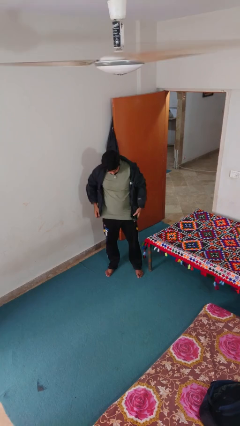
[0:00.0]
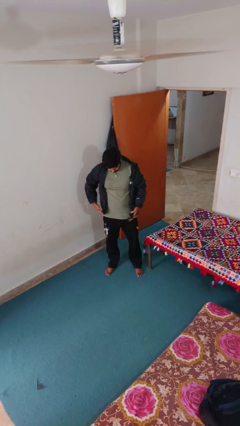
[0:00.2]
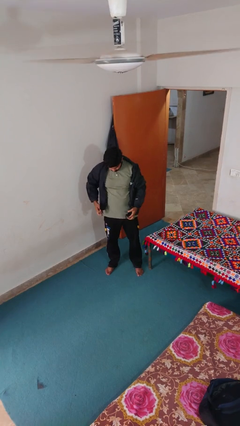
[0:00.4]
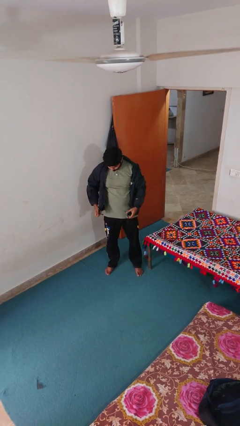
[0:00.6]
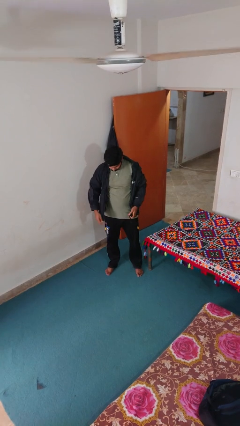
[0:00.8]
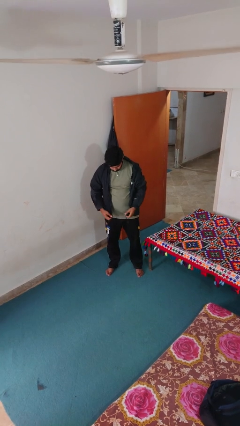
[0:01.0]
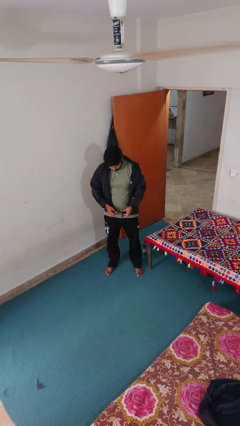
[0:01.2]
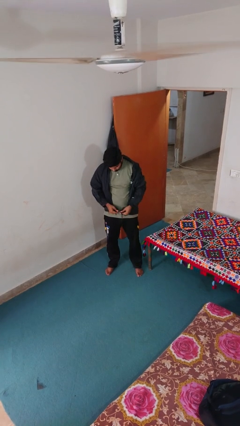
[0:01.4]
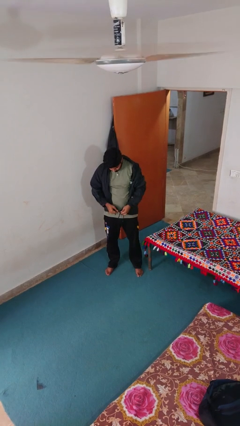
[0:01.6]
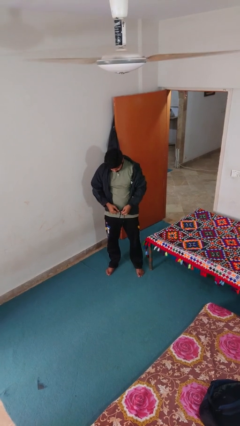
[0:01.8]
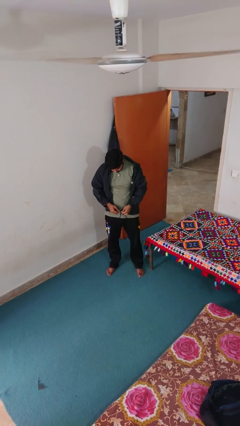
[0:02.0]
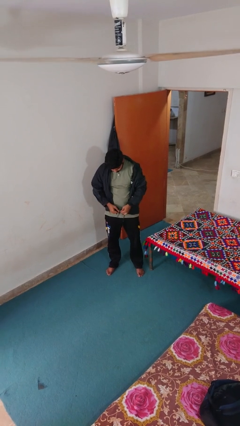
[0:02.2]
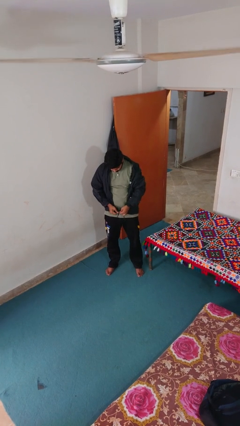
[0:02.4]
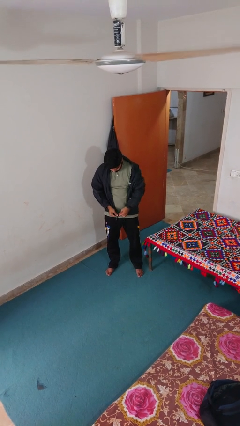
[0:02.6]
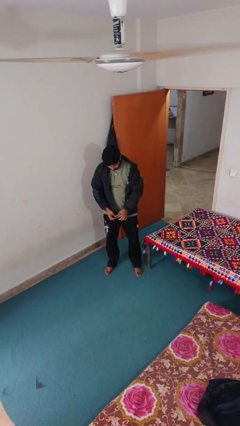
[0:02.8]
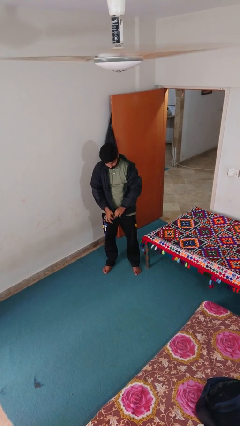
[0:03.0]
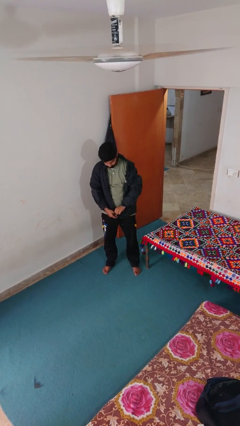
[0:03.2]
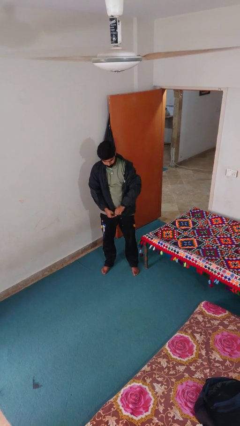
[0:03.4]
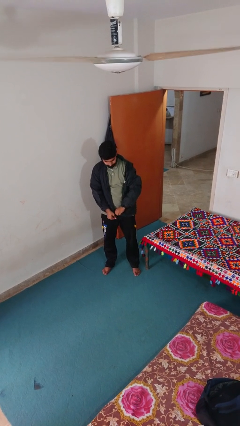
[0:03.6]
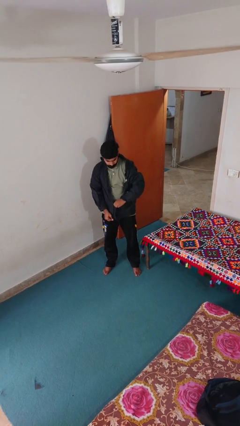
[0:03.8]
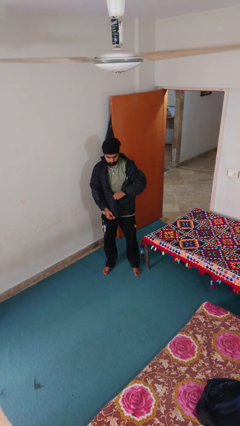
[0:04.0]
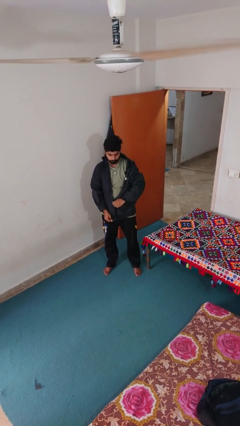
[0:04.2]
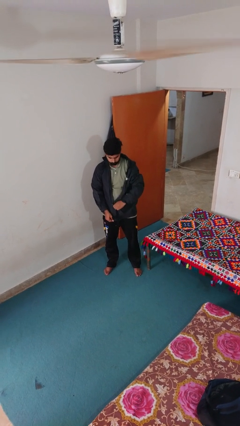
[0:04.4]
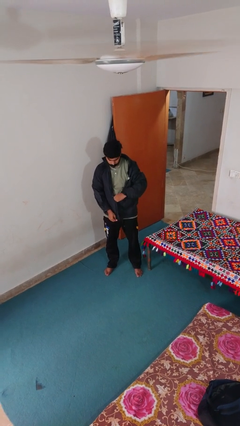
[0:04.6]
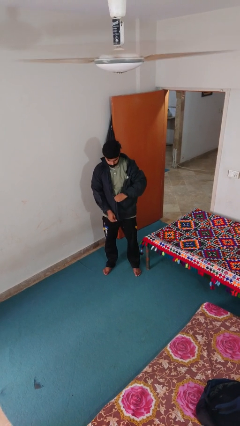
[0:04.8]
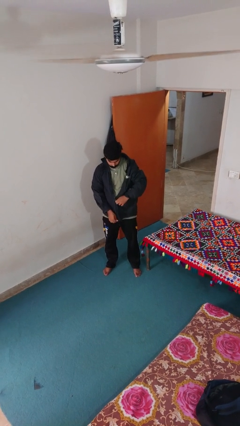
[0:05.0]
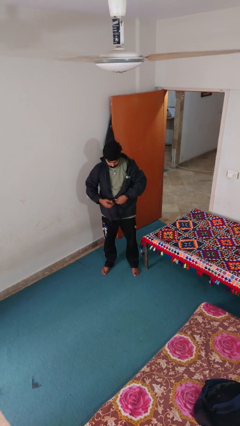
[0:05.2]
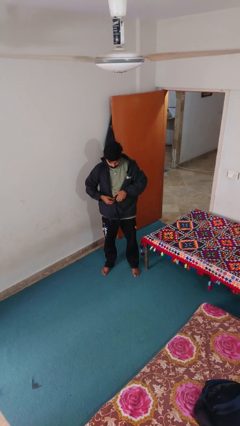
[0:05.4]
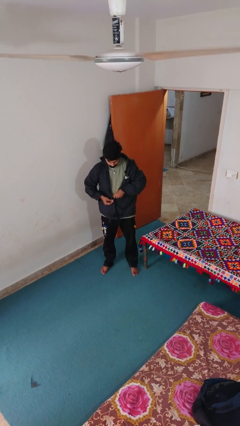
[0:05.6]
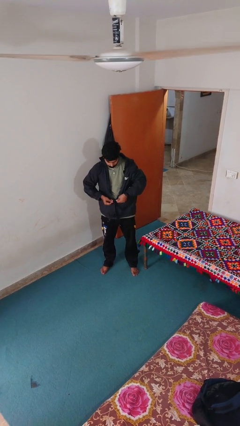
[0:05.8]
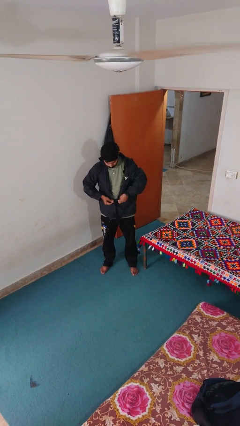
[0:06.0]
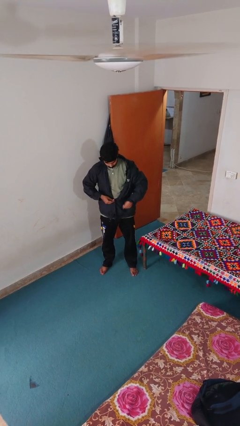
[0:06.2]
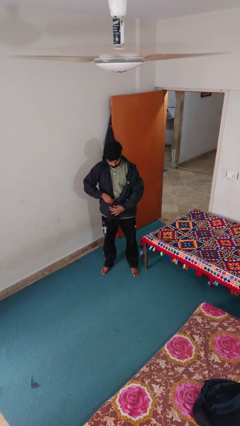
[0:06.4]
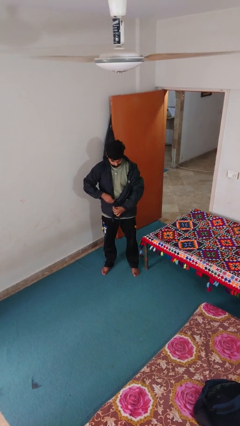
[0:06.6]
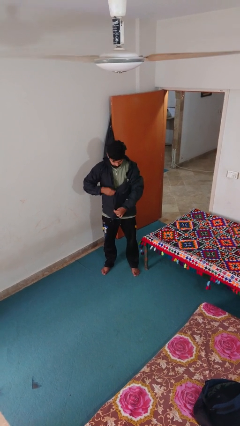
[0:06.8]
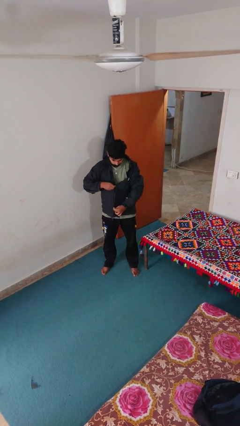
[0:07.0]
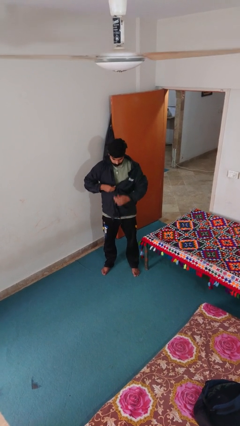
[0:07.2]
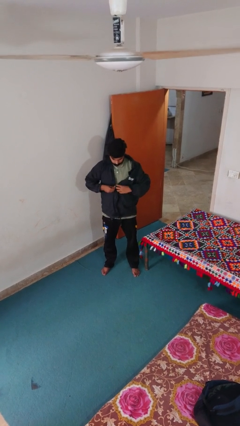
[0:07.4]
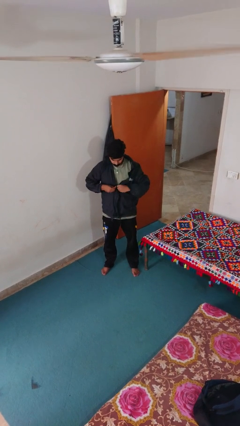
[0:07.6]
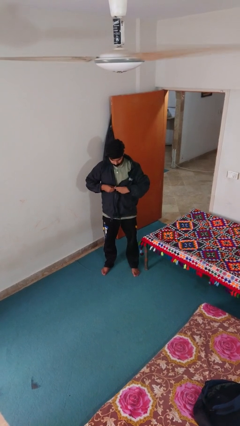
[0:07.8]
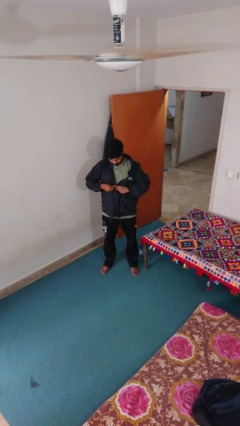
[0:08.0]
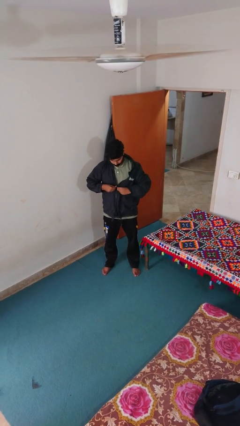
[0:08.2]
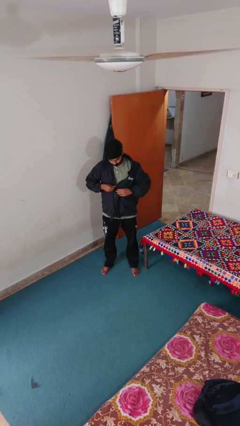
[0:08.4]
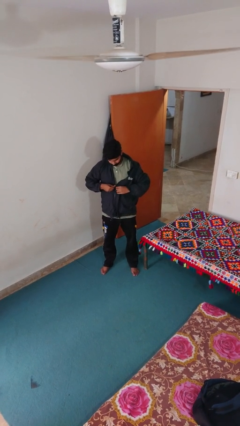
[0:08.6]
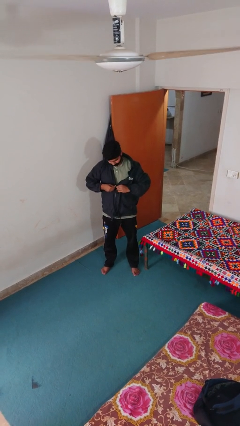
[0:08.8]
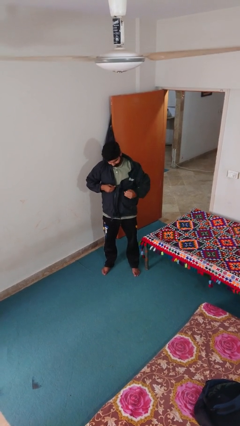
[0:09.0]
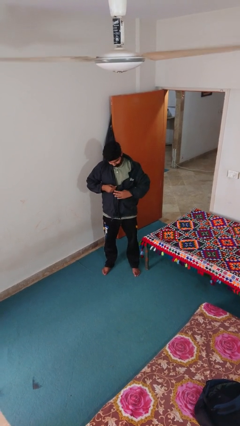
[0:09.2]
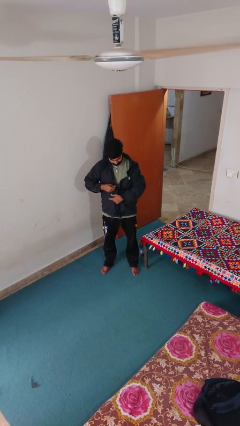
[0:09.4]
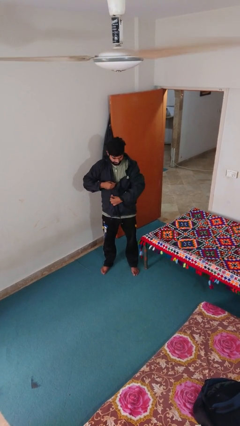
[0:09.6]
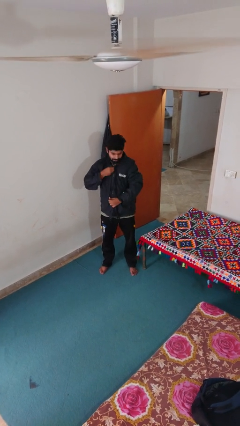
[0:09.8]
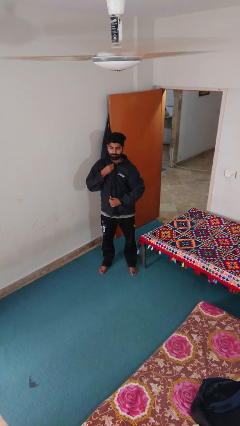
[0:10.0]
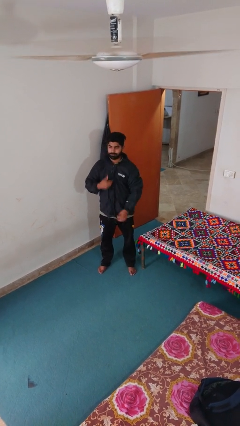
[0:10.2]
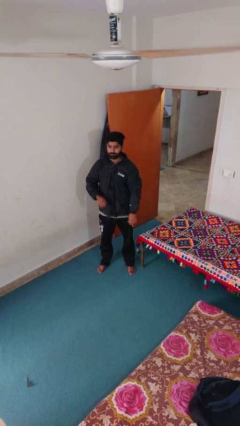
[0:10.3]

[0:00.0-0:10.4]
person zips up jacket

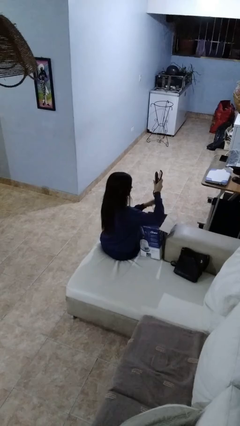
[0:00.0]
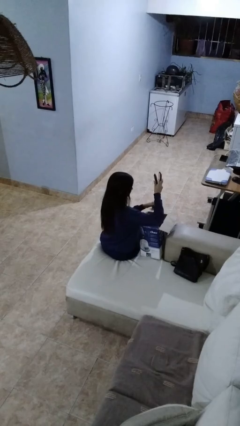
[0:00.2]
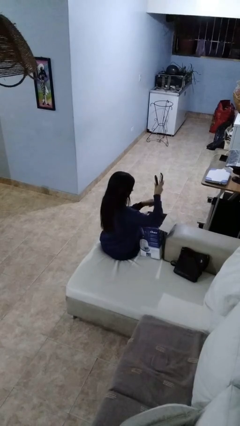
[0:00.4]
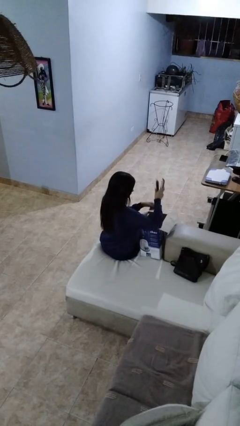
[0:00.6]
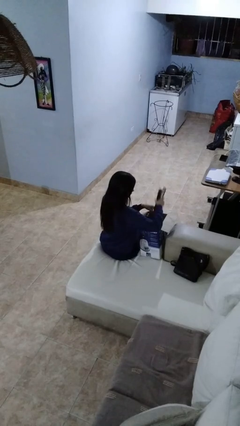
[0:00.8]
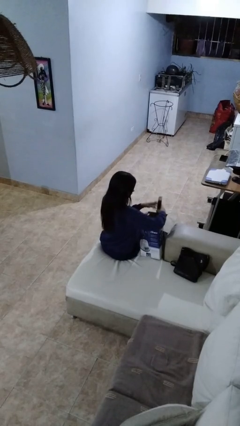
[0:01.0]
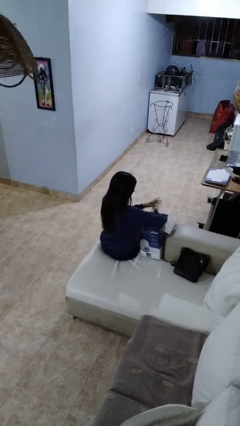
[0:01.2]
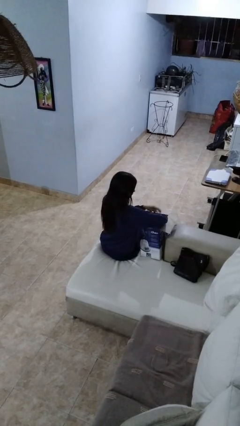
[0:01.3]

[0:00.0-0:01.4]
person puts object into box

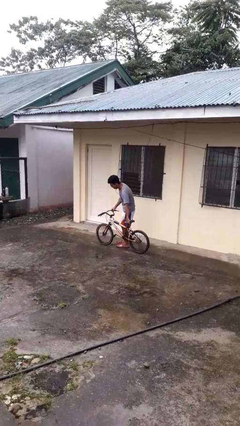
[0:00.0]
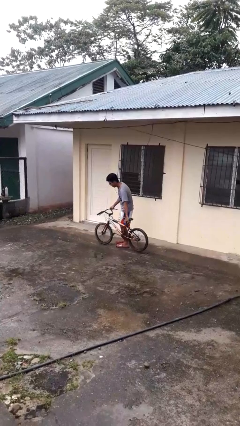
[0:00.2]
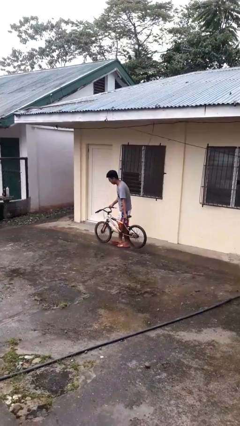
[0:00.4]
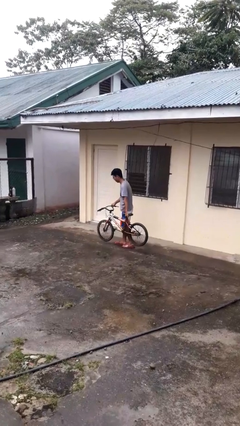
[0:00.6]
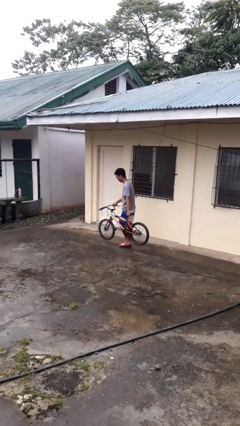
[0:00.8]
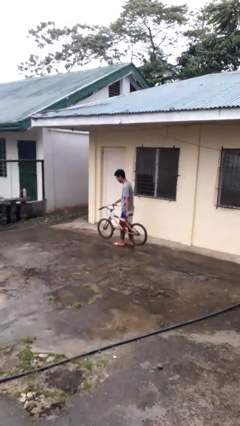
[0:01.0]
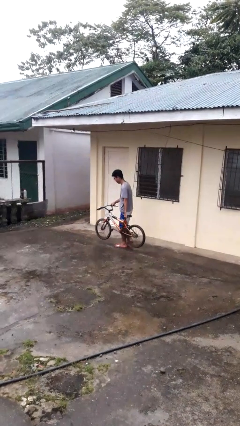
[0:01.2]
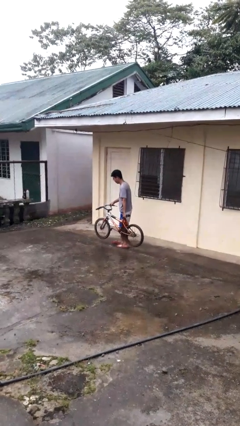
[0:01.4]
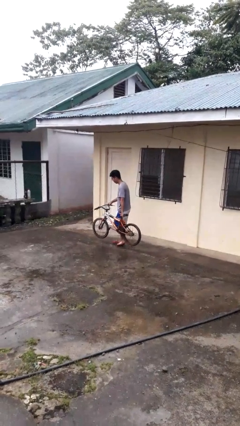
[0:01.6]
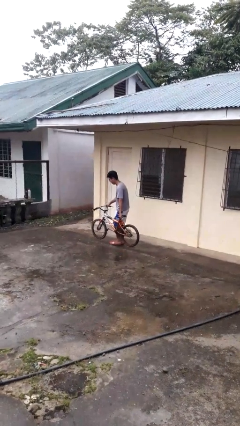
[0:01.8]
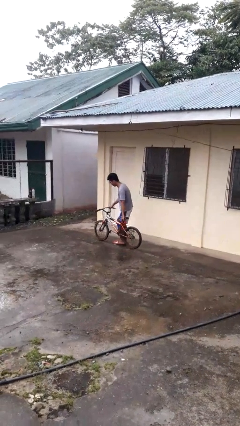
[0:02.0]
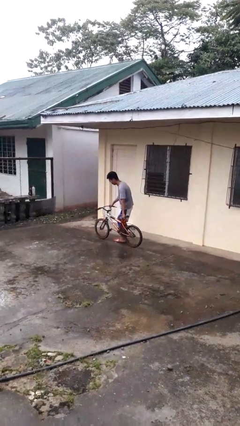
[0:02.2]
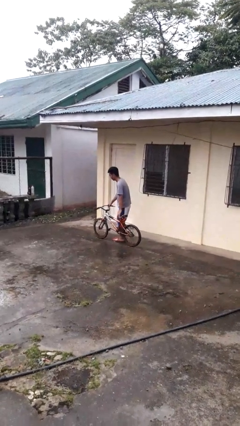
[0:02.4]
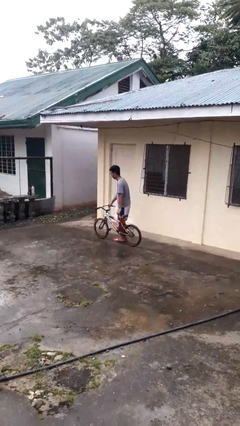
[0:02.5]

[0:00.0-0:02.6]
person carries bicycle

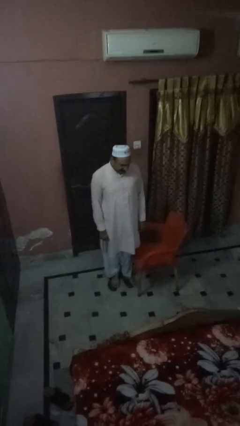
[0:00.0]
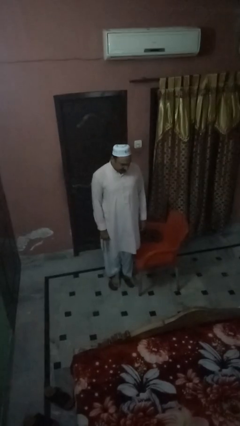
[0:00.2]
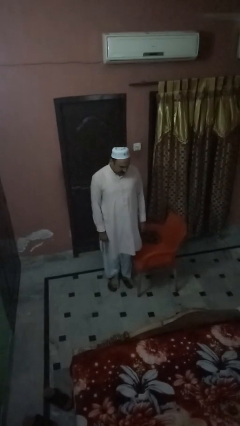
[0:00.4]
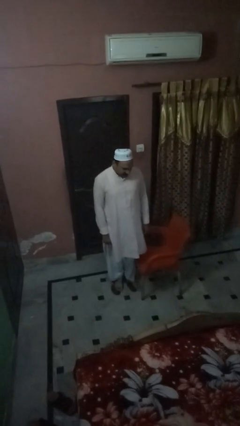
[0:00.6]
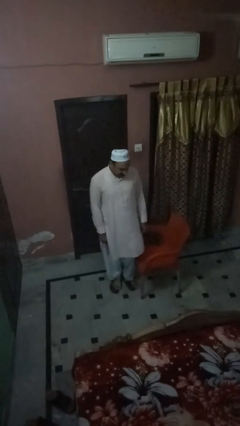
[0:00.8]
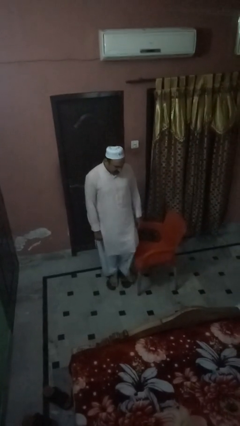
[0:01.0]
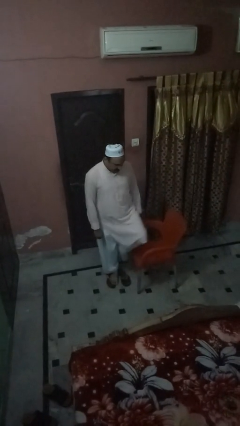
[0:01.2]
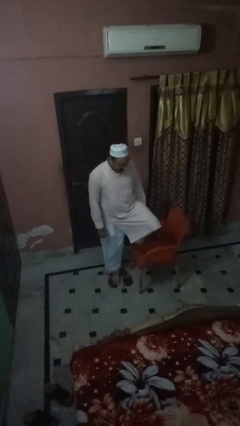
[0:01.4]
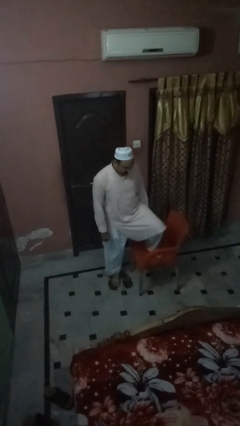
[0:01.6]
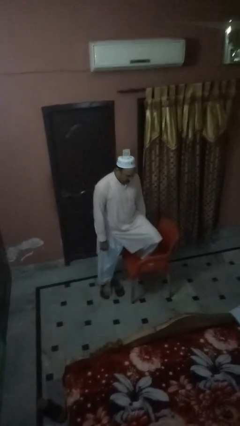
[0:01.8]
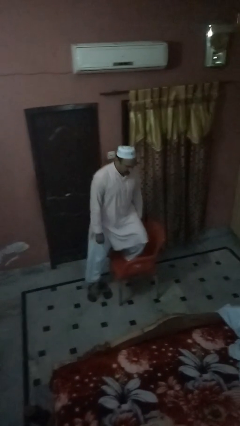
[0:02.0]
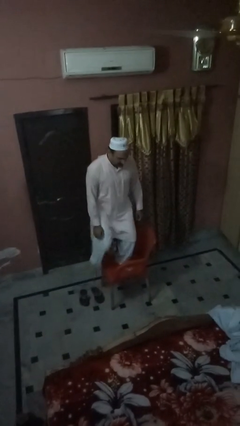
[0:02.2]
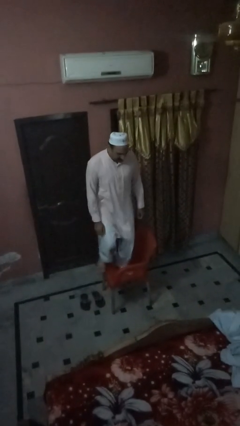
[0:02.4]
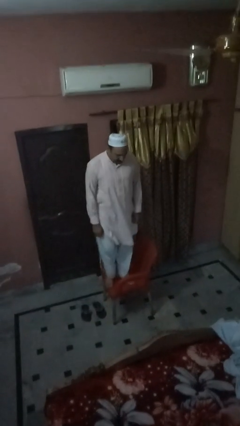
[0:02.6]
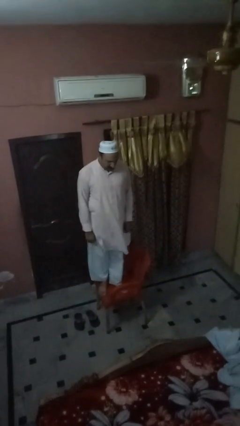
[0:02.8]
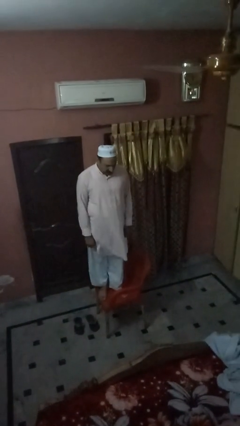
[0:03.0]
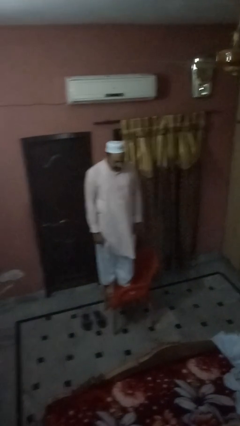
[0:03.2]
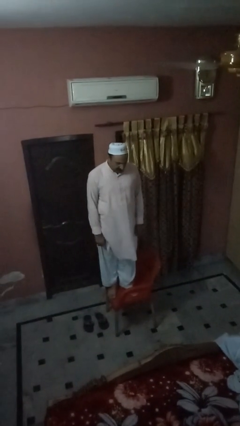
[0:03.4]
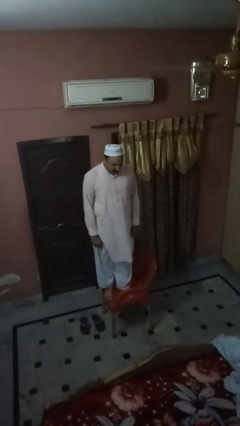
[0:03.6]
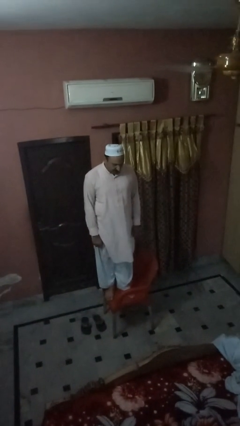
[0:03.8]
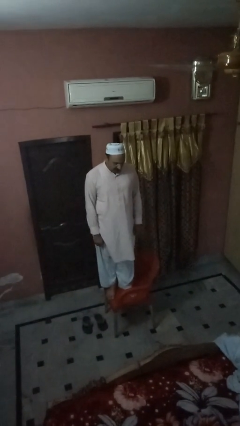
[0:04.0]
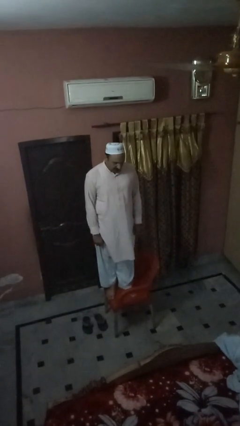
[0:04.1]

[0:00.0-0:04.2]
person climbs on chair
